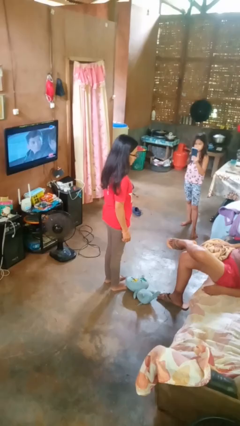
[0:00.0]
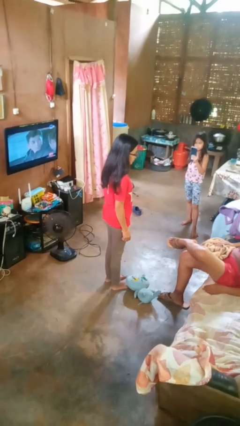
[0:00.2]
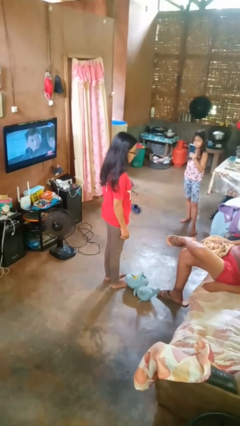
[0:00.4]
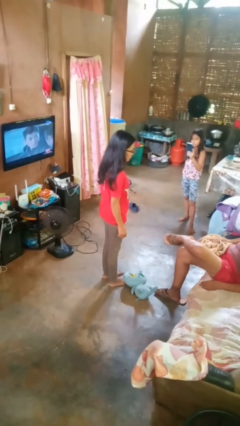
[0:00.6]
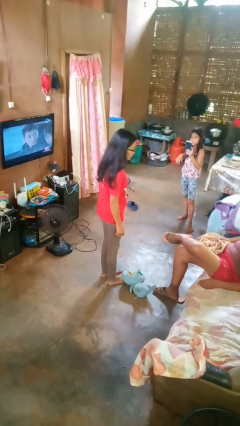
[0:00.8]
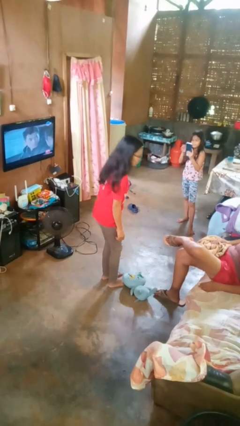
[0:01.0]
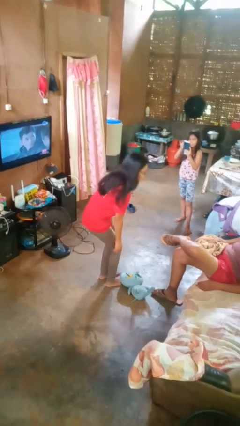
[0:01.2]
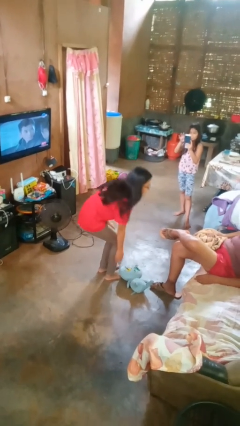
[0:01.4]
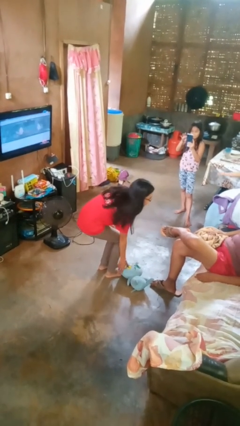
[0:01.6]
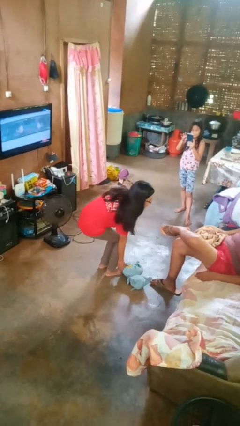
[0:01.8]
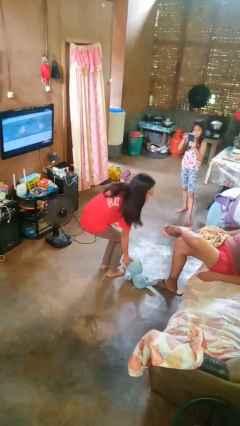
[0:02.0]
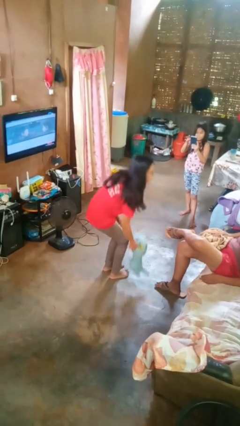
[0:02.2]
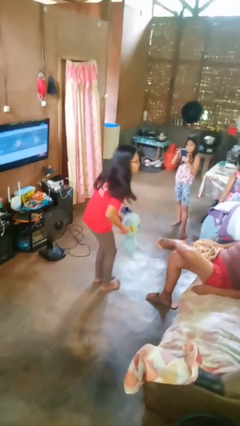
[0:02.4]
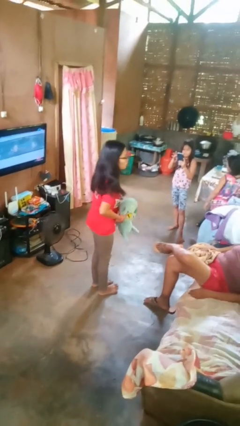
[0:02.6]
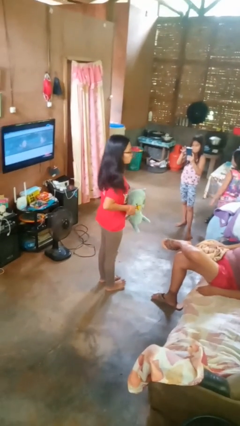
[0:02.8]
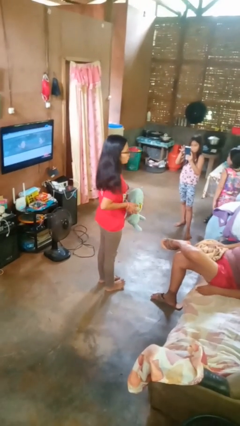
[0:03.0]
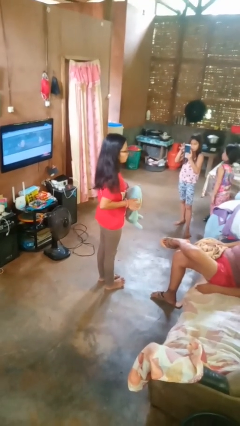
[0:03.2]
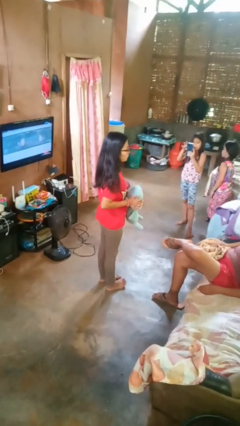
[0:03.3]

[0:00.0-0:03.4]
person picks up object from floor

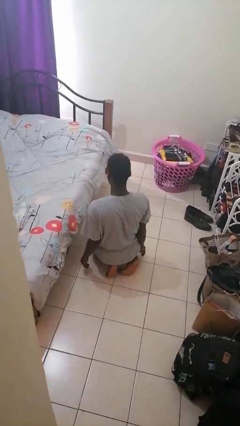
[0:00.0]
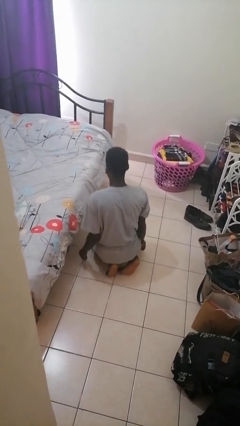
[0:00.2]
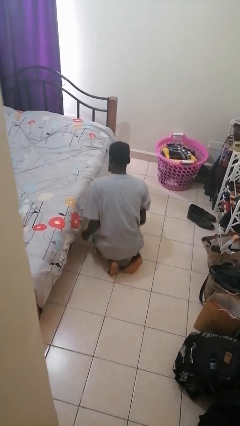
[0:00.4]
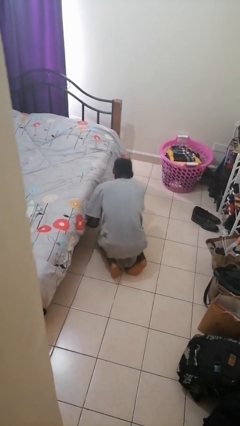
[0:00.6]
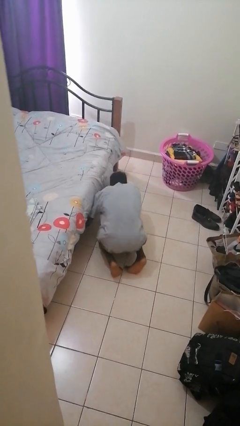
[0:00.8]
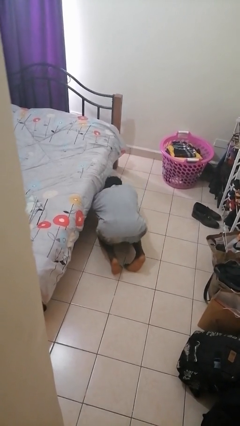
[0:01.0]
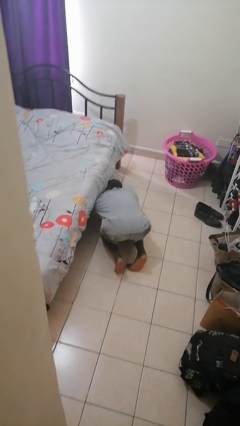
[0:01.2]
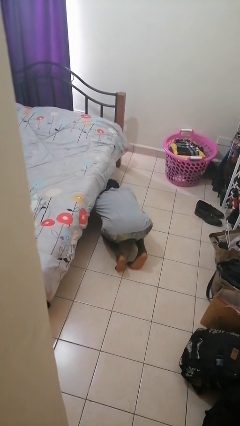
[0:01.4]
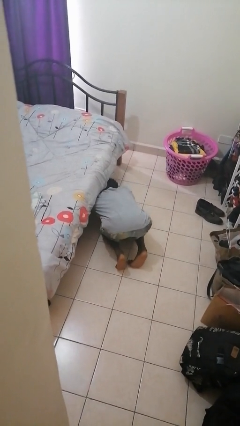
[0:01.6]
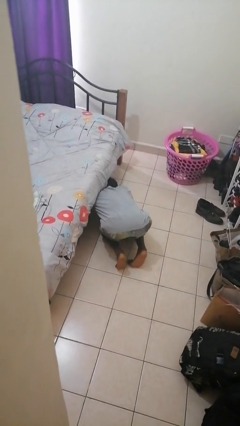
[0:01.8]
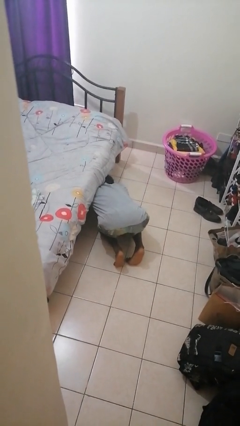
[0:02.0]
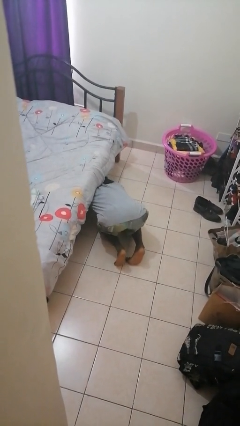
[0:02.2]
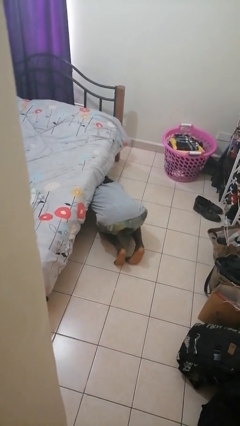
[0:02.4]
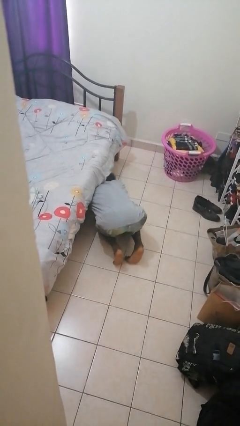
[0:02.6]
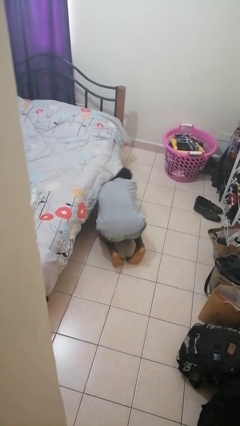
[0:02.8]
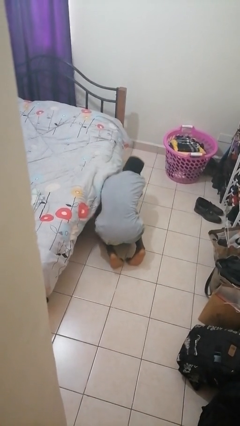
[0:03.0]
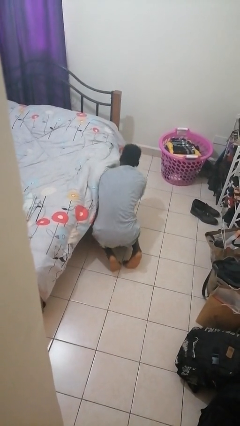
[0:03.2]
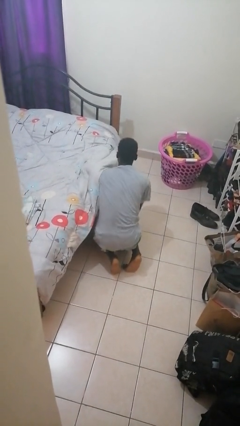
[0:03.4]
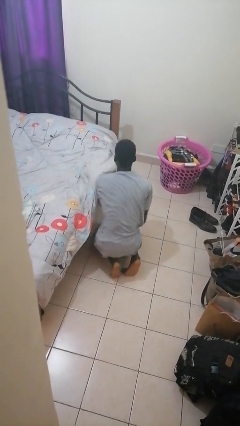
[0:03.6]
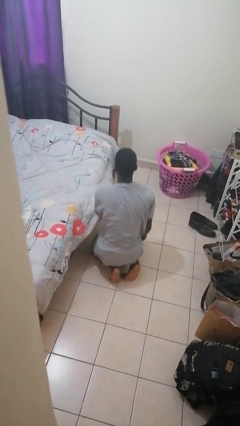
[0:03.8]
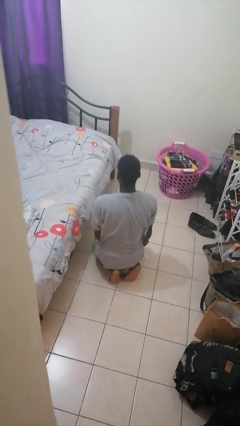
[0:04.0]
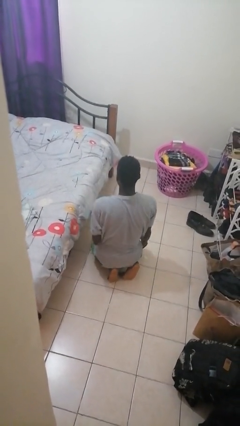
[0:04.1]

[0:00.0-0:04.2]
person searches under bed

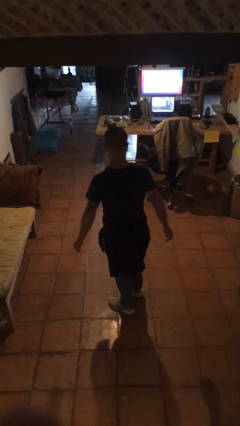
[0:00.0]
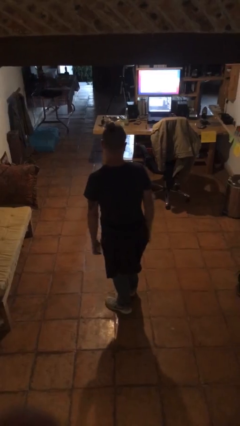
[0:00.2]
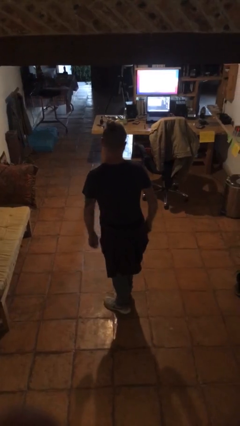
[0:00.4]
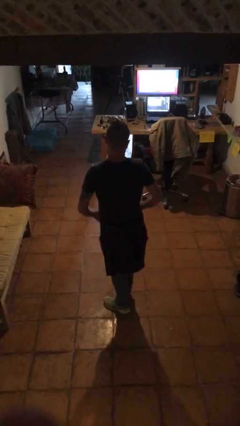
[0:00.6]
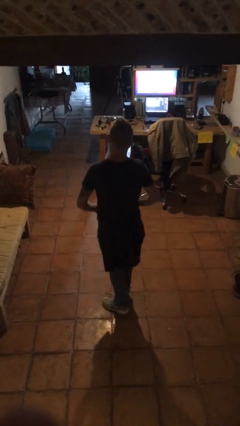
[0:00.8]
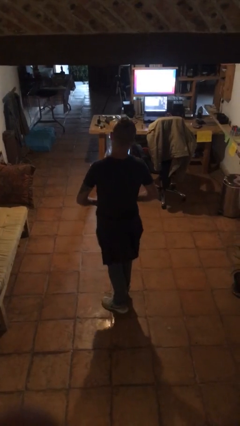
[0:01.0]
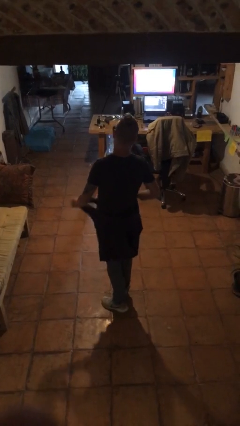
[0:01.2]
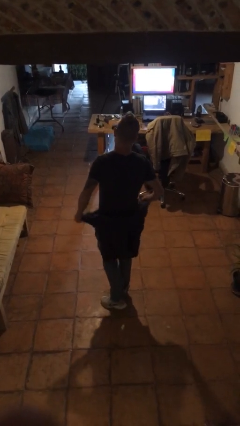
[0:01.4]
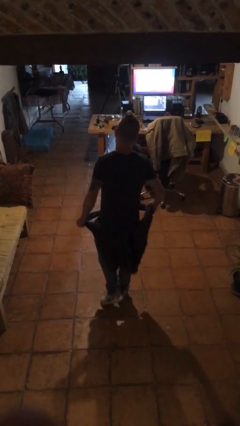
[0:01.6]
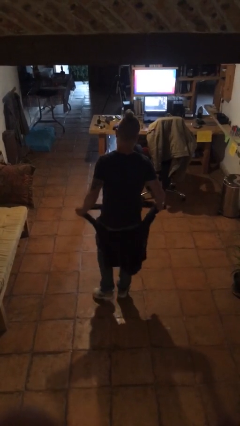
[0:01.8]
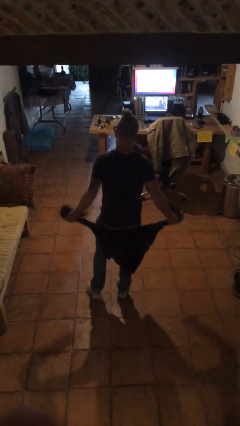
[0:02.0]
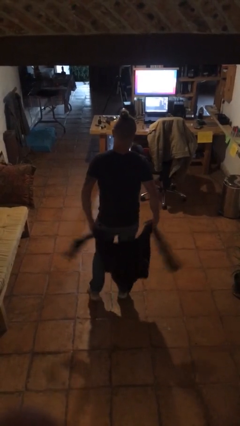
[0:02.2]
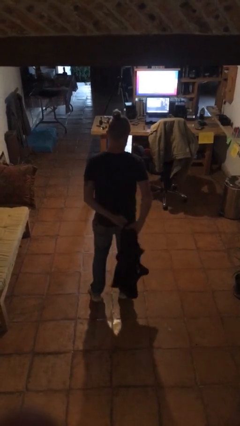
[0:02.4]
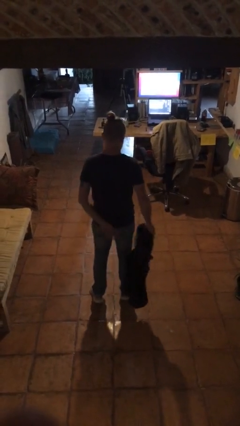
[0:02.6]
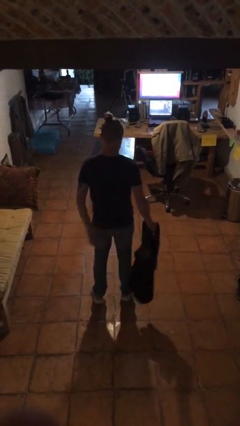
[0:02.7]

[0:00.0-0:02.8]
person unties jacket around waist

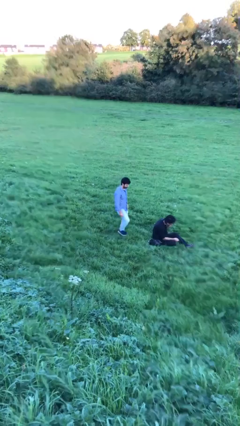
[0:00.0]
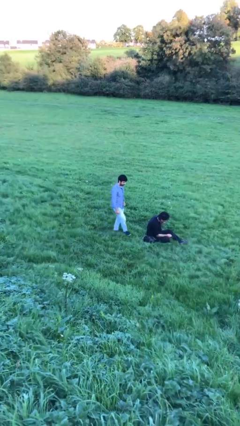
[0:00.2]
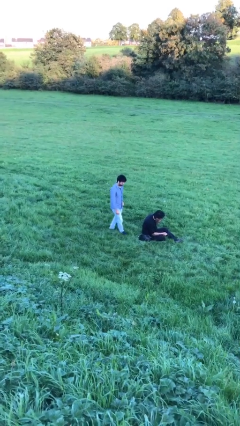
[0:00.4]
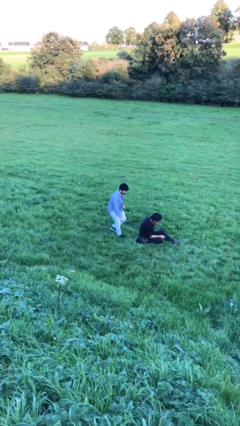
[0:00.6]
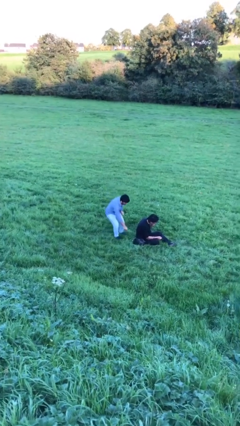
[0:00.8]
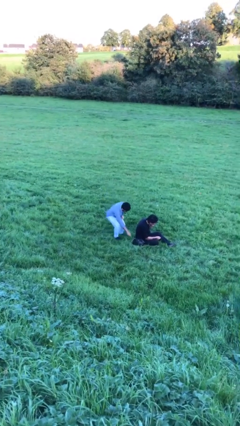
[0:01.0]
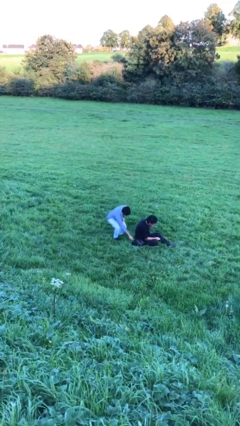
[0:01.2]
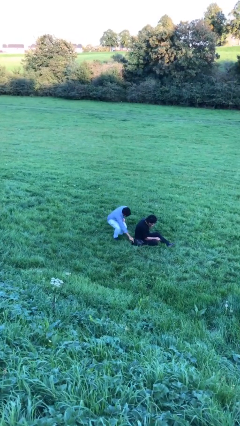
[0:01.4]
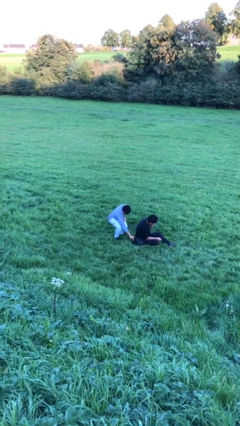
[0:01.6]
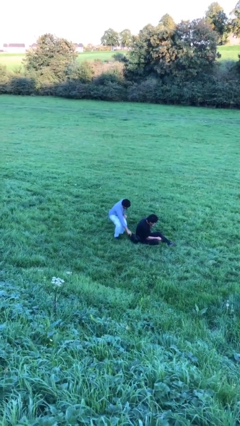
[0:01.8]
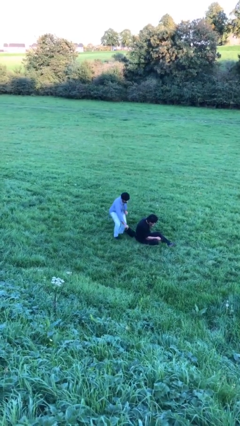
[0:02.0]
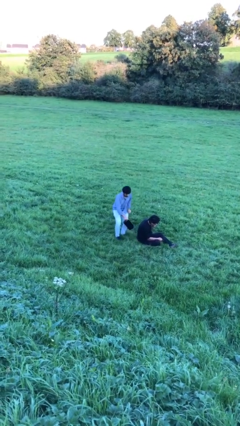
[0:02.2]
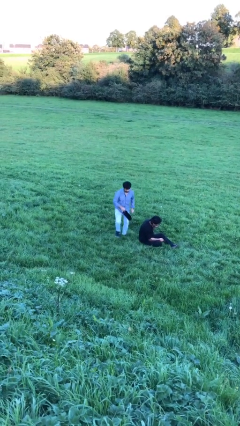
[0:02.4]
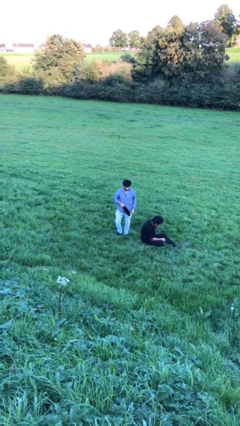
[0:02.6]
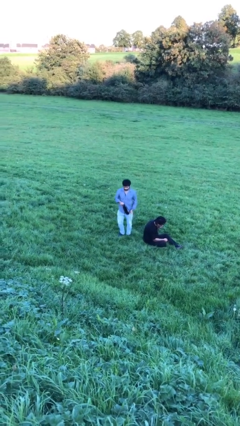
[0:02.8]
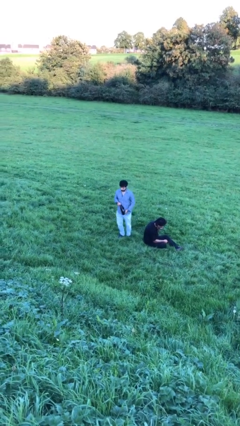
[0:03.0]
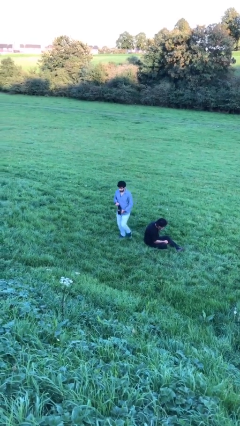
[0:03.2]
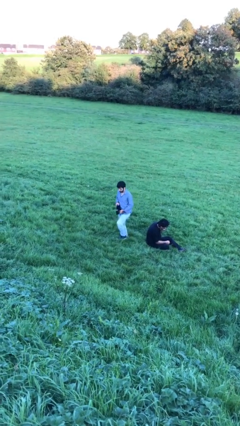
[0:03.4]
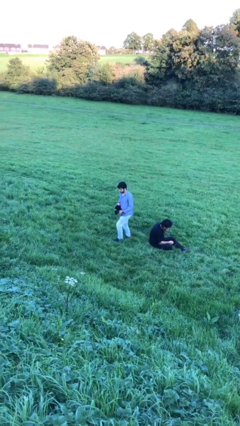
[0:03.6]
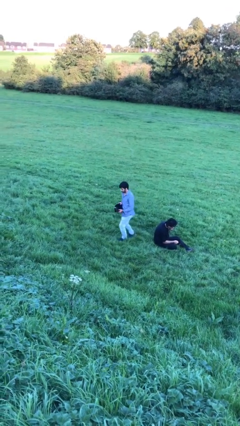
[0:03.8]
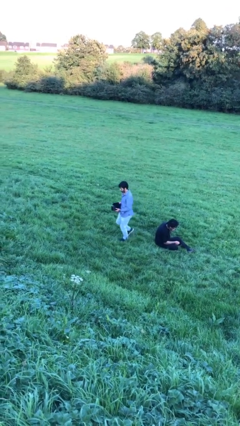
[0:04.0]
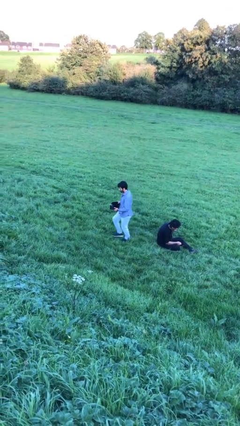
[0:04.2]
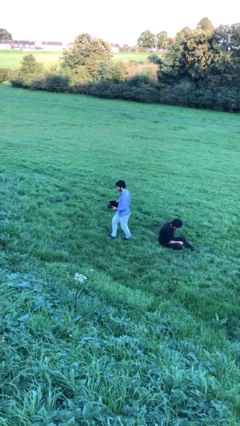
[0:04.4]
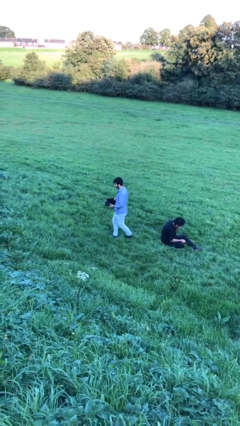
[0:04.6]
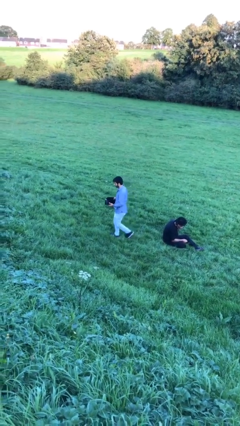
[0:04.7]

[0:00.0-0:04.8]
person steals object from person

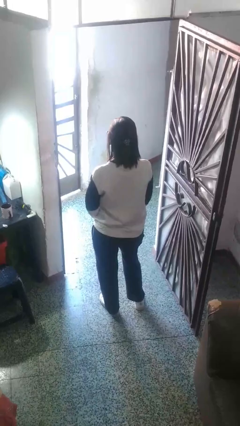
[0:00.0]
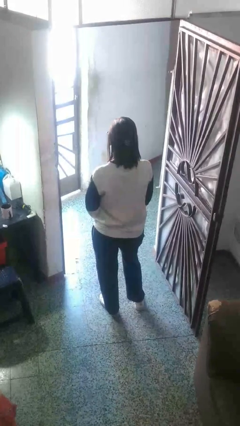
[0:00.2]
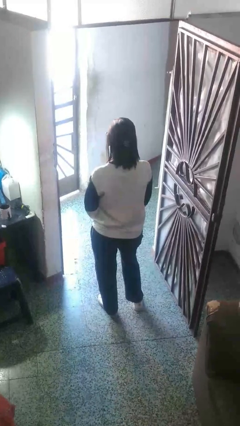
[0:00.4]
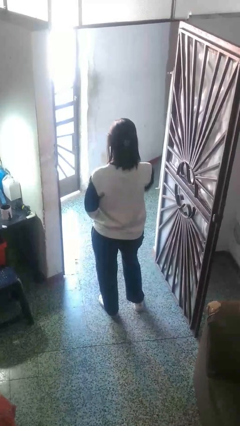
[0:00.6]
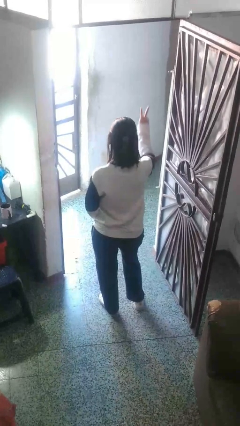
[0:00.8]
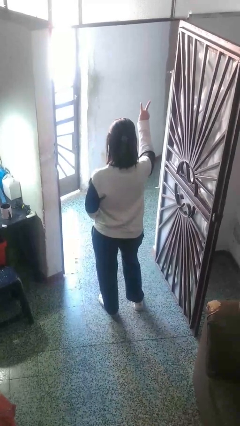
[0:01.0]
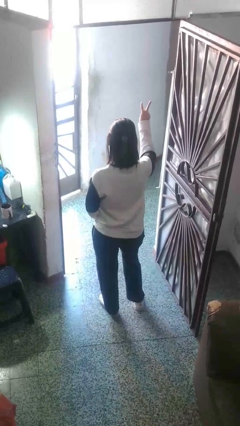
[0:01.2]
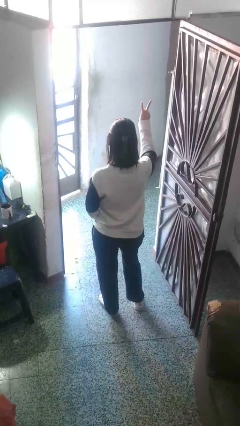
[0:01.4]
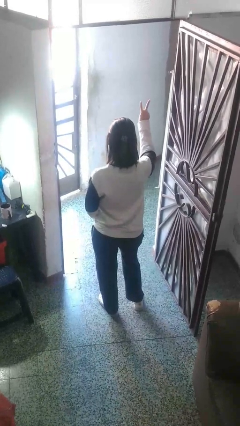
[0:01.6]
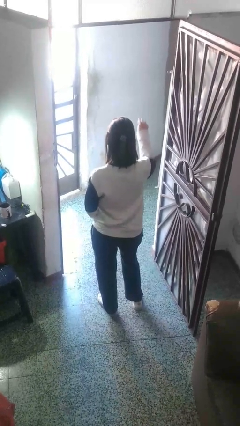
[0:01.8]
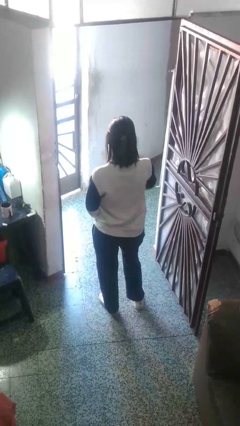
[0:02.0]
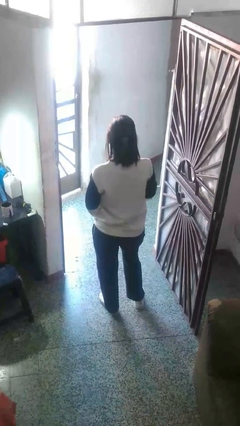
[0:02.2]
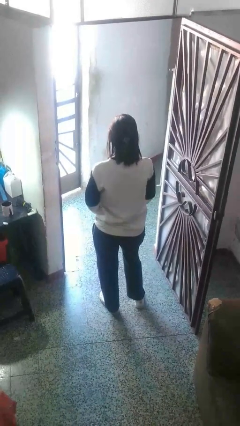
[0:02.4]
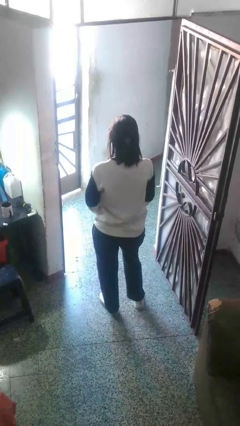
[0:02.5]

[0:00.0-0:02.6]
person gestures peace
